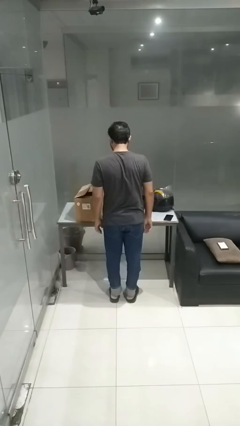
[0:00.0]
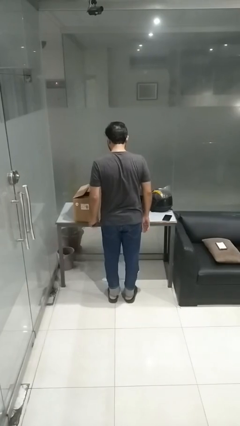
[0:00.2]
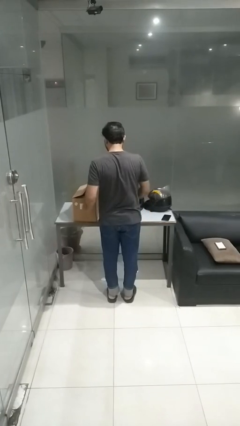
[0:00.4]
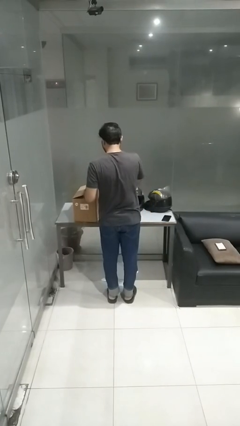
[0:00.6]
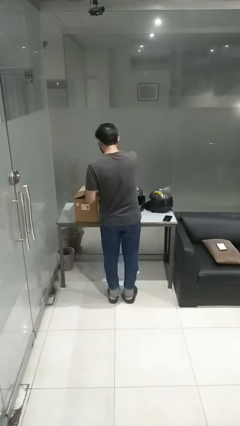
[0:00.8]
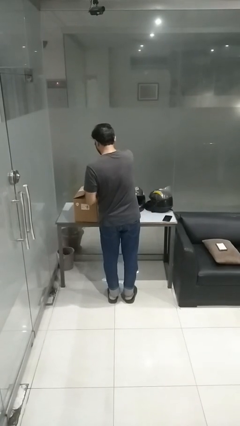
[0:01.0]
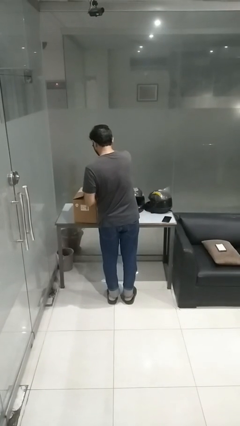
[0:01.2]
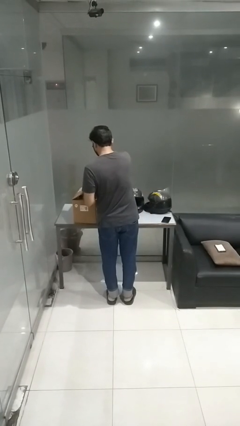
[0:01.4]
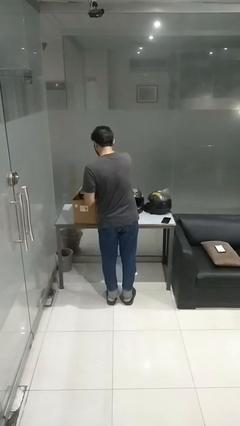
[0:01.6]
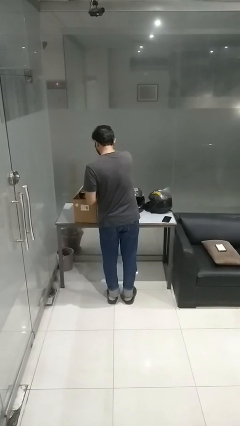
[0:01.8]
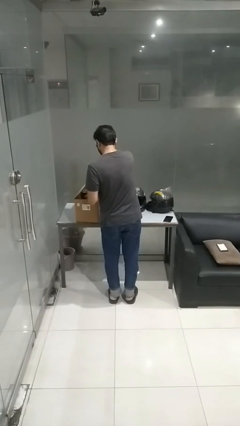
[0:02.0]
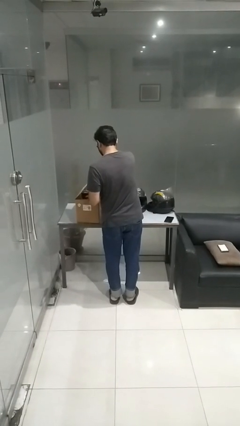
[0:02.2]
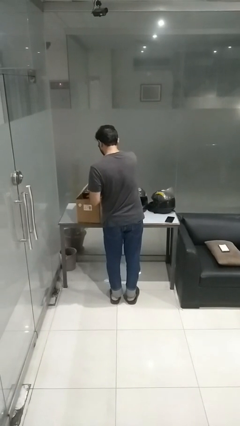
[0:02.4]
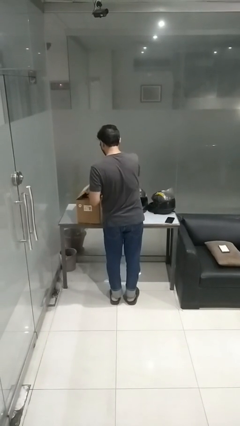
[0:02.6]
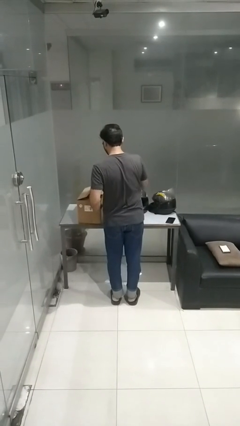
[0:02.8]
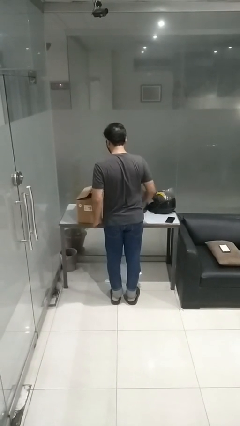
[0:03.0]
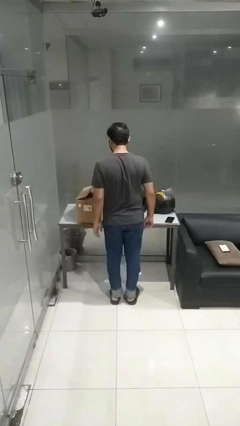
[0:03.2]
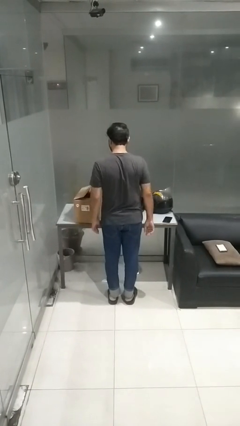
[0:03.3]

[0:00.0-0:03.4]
person searches in box

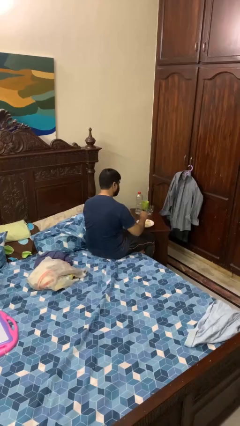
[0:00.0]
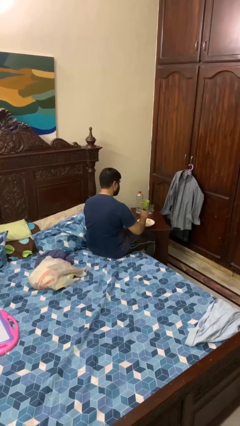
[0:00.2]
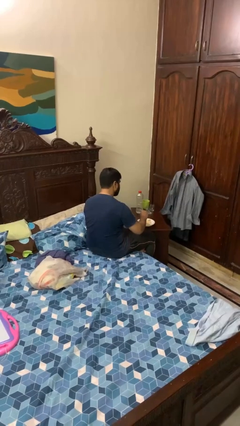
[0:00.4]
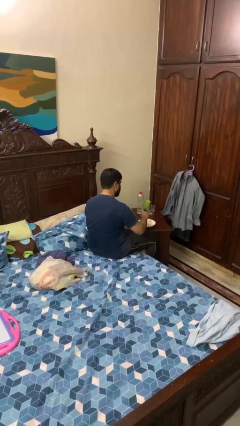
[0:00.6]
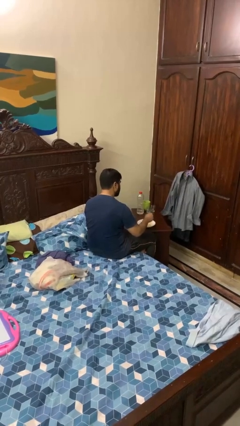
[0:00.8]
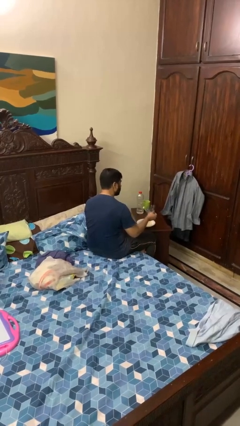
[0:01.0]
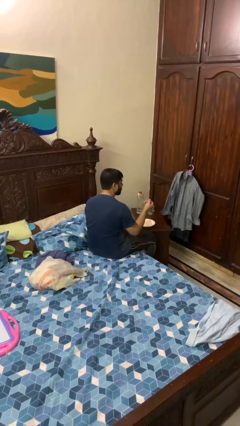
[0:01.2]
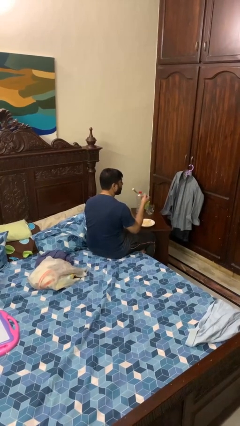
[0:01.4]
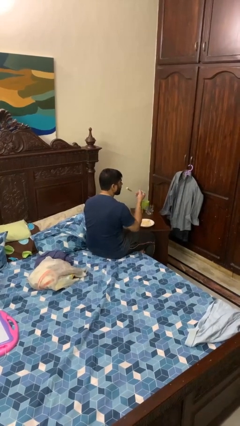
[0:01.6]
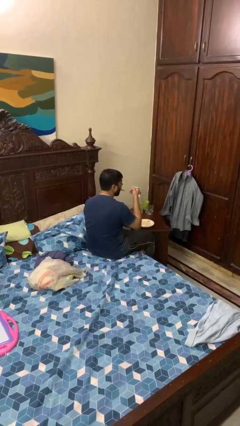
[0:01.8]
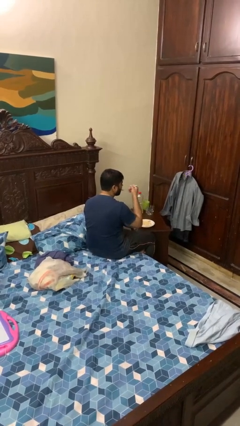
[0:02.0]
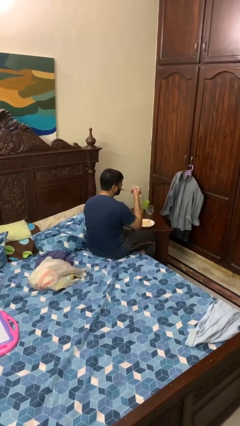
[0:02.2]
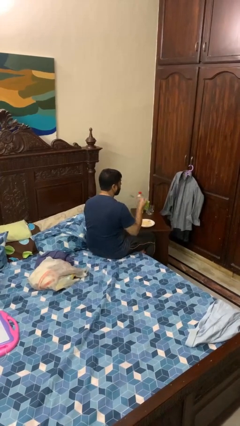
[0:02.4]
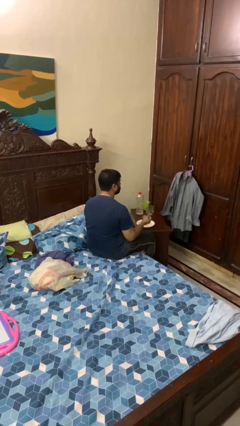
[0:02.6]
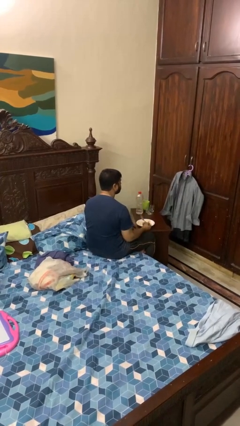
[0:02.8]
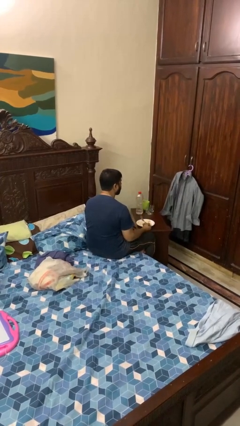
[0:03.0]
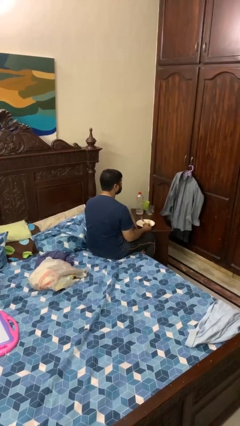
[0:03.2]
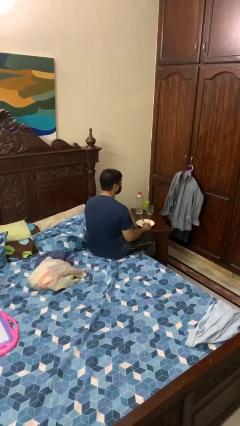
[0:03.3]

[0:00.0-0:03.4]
person eats with utensil

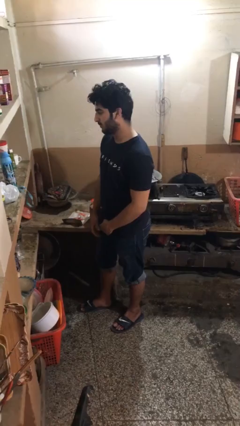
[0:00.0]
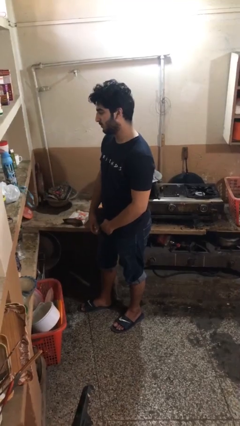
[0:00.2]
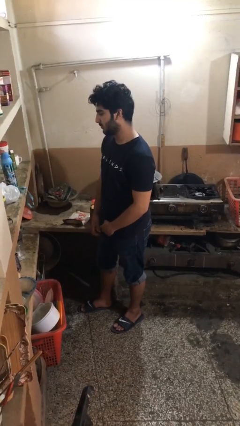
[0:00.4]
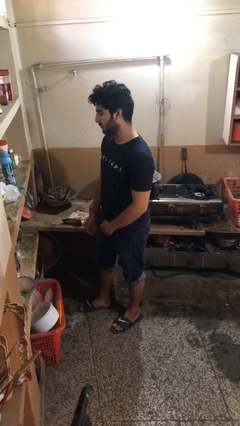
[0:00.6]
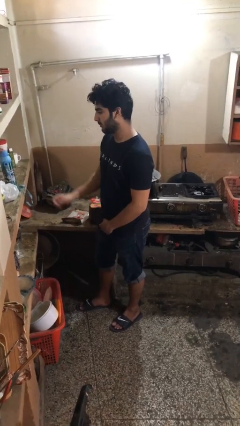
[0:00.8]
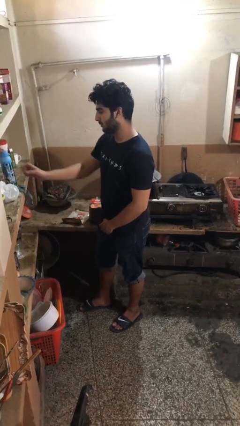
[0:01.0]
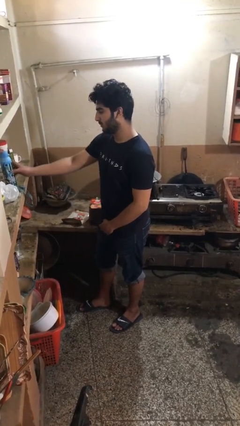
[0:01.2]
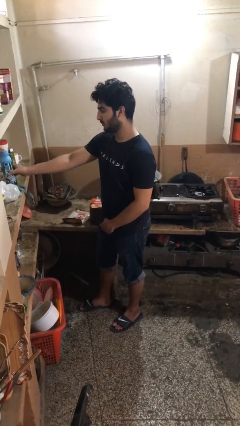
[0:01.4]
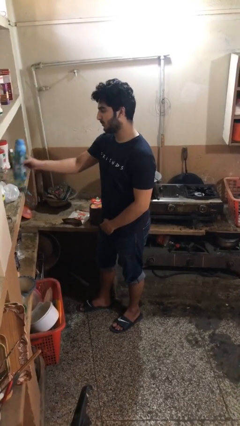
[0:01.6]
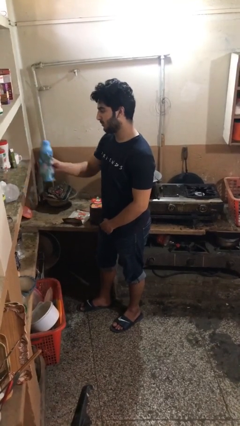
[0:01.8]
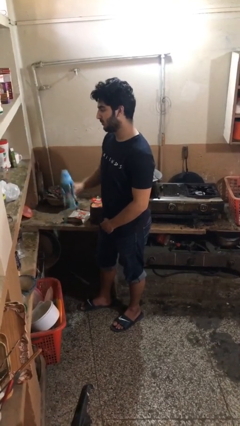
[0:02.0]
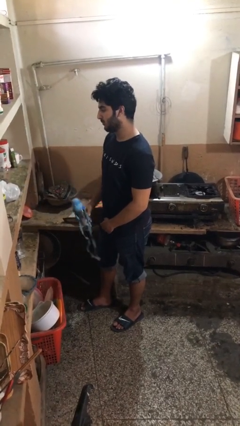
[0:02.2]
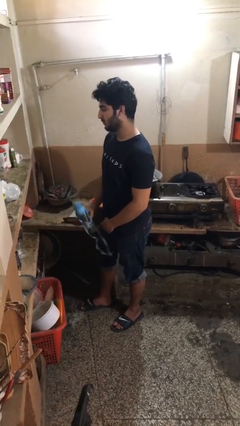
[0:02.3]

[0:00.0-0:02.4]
person picks up object from countertop

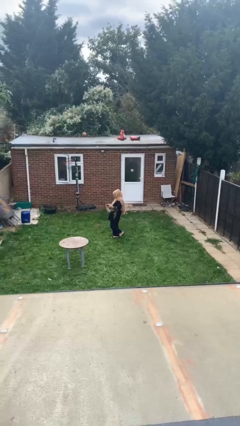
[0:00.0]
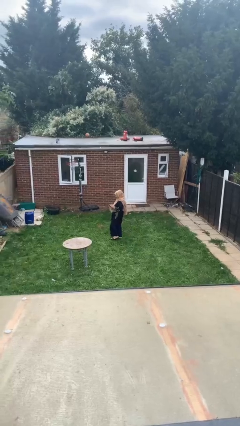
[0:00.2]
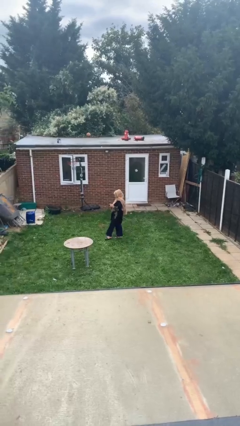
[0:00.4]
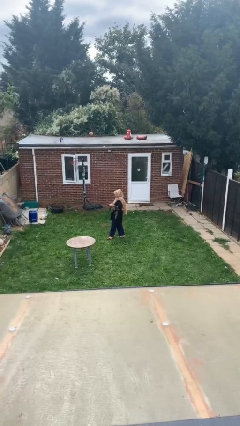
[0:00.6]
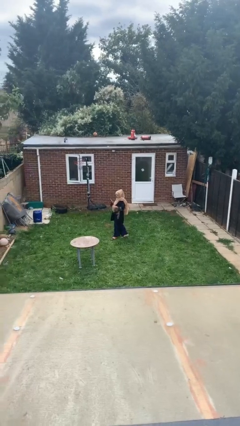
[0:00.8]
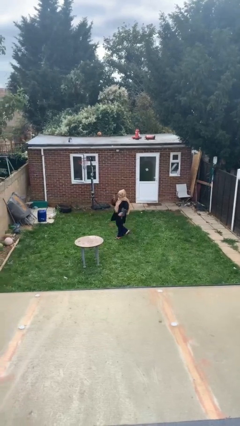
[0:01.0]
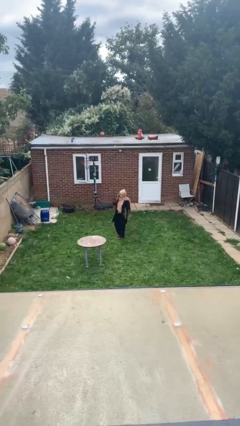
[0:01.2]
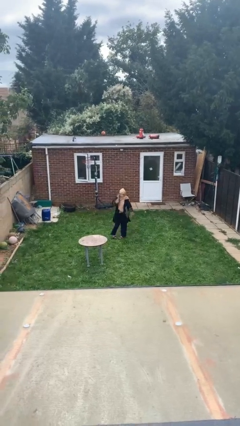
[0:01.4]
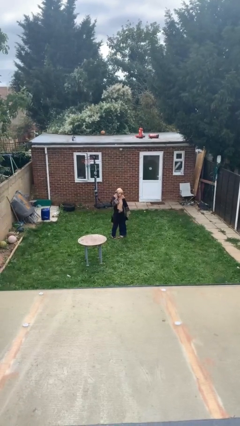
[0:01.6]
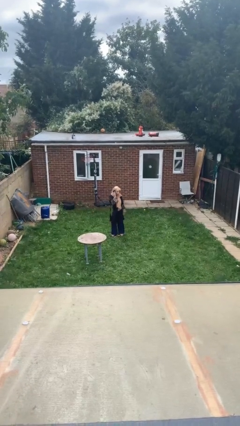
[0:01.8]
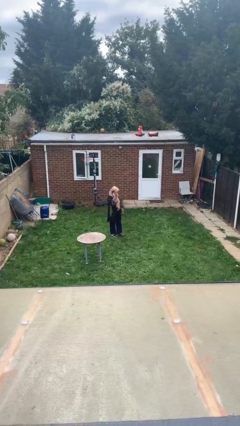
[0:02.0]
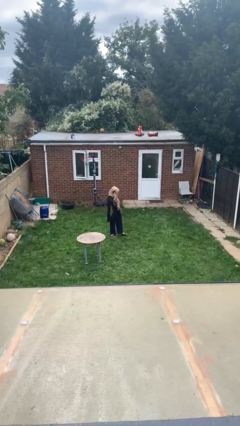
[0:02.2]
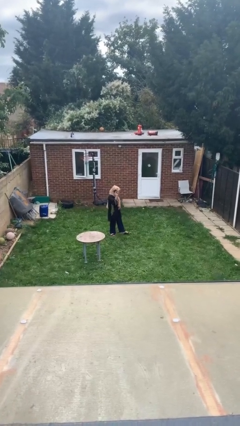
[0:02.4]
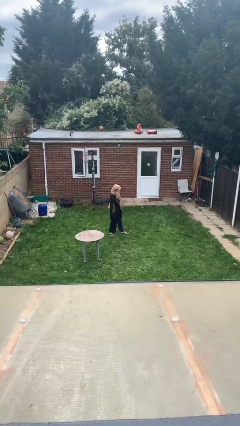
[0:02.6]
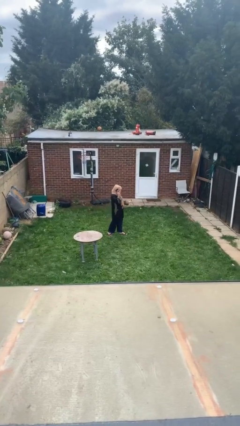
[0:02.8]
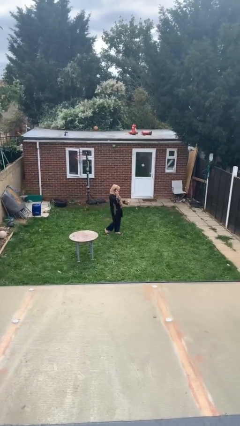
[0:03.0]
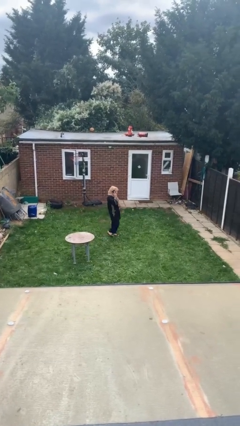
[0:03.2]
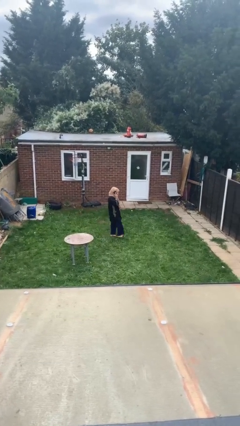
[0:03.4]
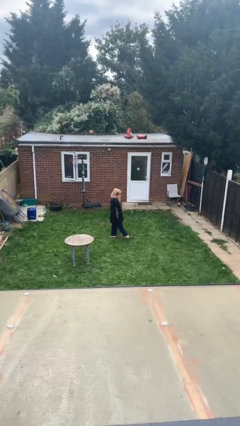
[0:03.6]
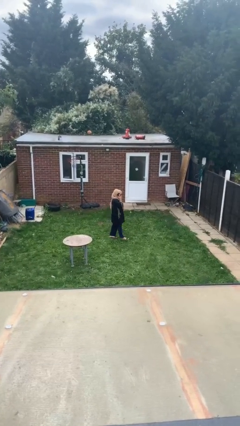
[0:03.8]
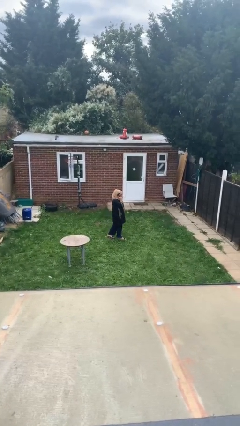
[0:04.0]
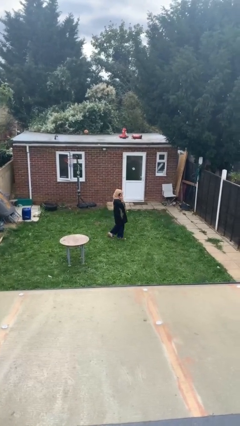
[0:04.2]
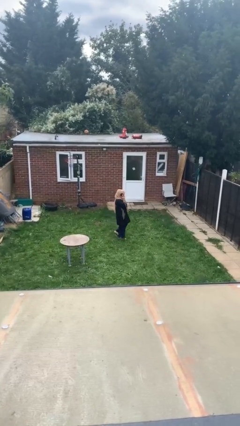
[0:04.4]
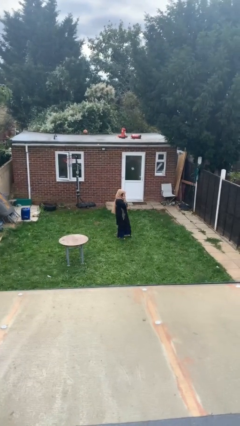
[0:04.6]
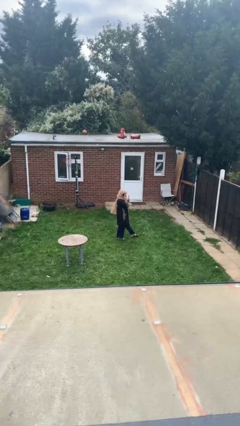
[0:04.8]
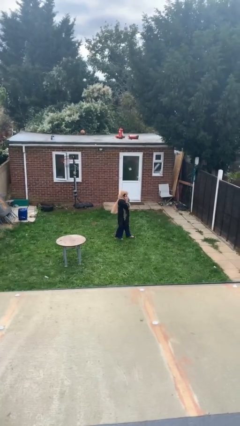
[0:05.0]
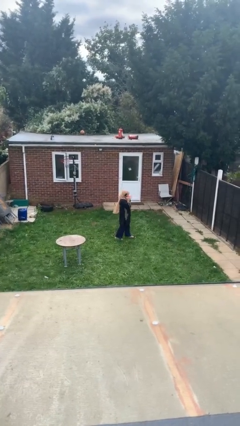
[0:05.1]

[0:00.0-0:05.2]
person talks on phone

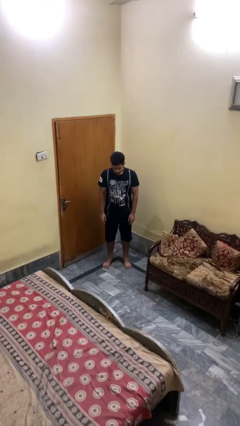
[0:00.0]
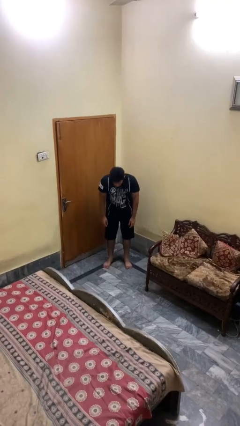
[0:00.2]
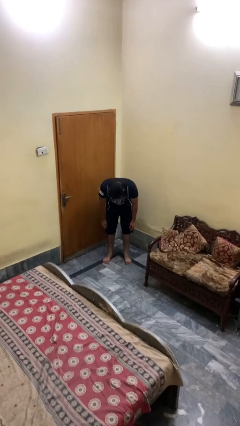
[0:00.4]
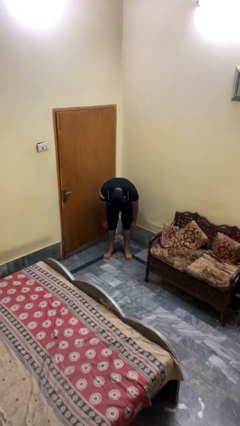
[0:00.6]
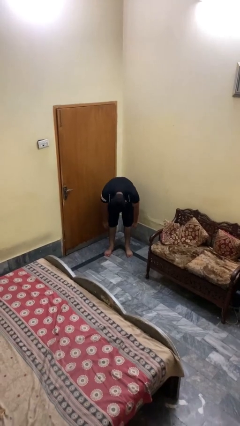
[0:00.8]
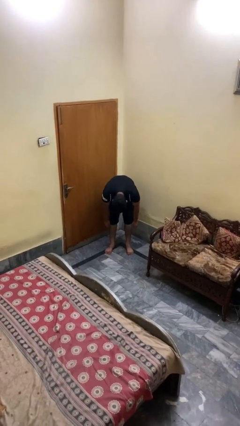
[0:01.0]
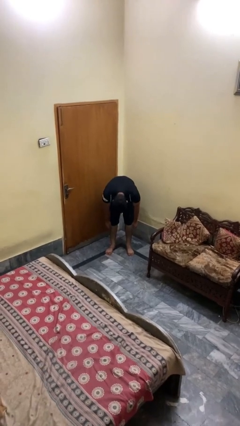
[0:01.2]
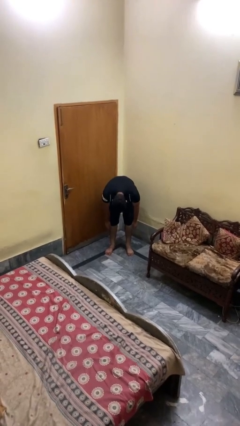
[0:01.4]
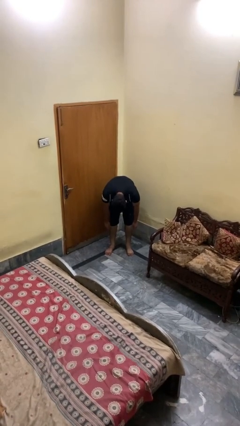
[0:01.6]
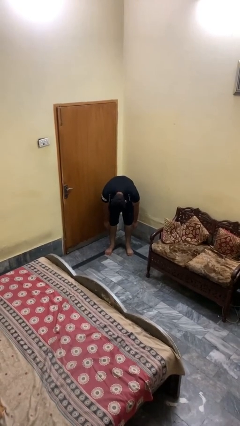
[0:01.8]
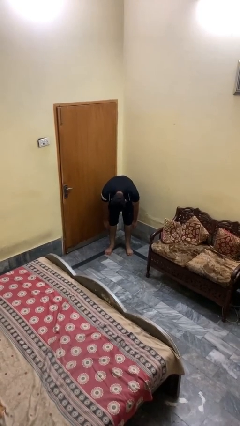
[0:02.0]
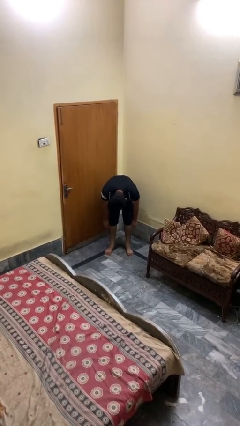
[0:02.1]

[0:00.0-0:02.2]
person bows

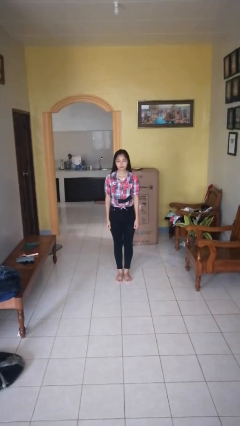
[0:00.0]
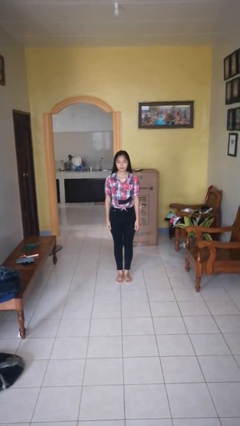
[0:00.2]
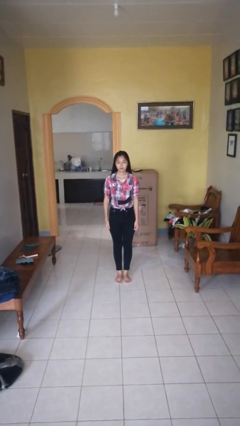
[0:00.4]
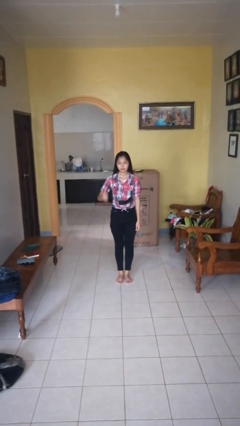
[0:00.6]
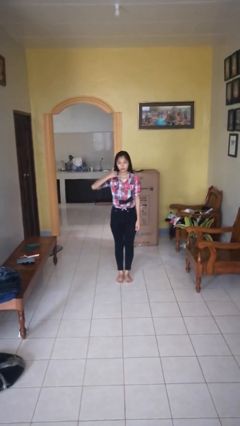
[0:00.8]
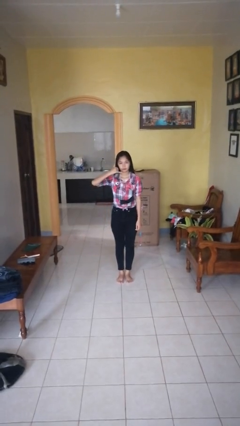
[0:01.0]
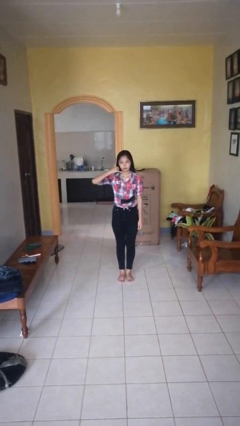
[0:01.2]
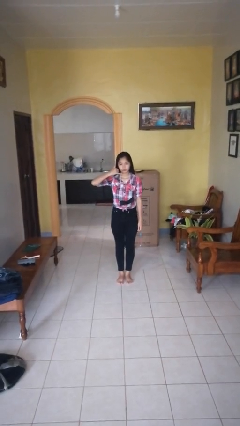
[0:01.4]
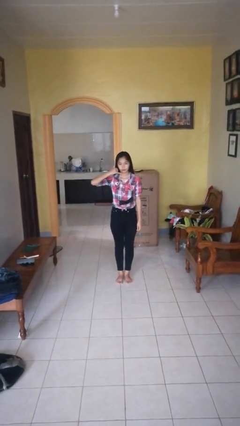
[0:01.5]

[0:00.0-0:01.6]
person gestures call me
